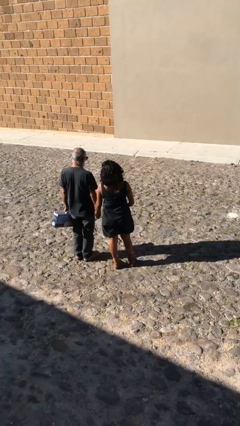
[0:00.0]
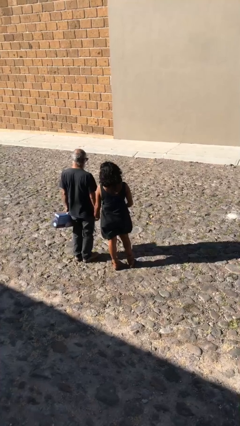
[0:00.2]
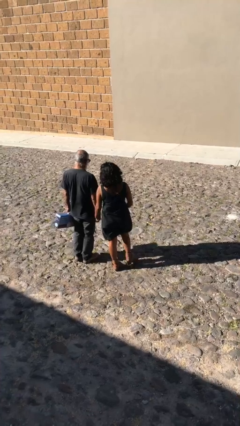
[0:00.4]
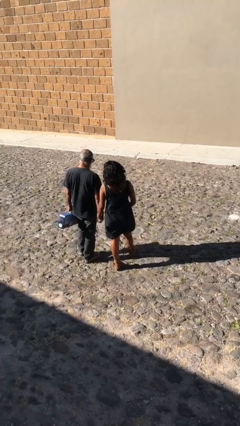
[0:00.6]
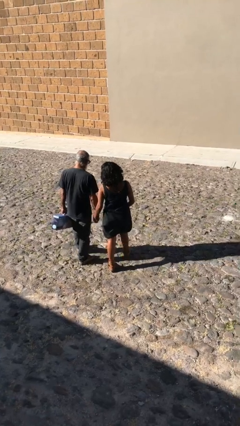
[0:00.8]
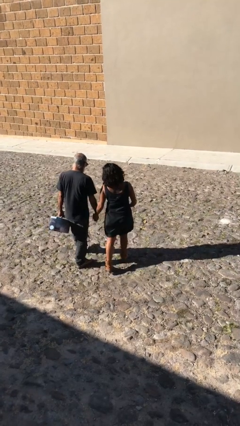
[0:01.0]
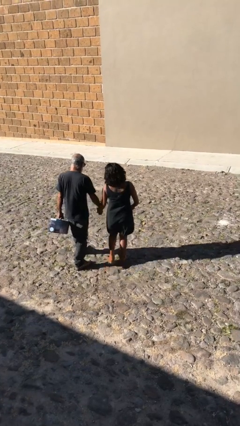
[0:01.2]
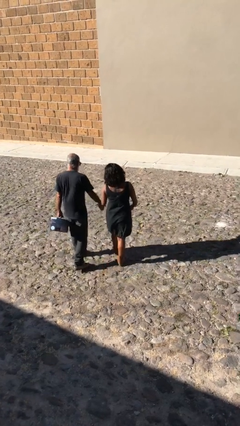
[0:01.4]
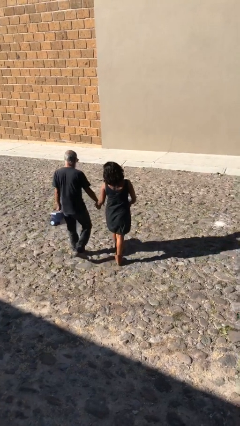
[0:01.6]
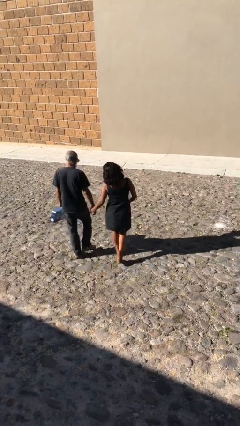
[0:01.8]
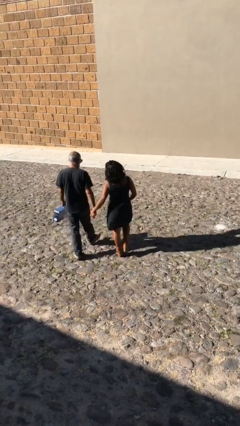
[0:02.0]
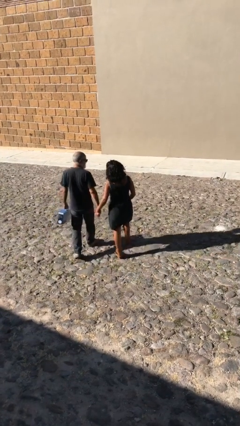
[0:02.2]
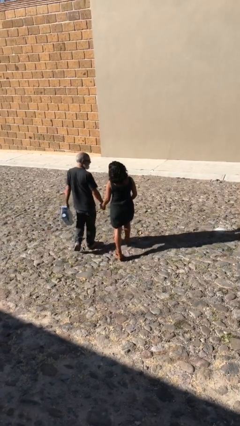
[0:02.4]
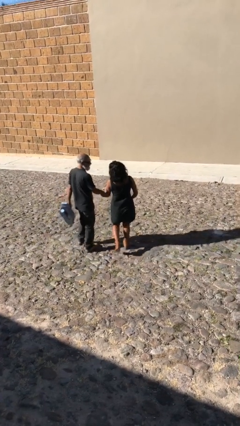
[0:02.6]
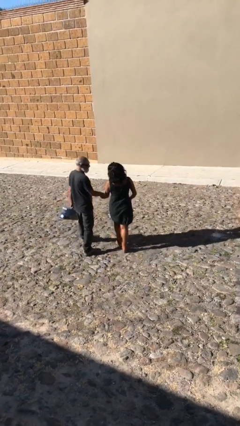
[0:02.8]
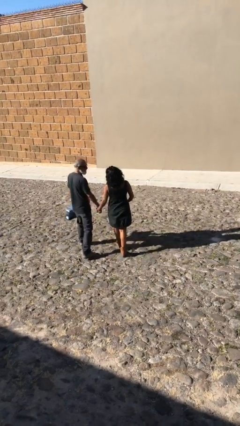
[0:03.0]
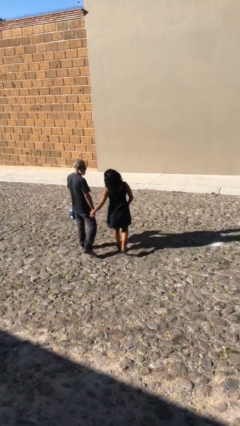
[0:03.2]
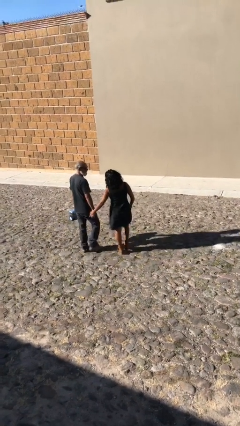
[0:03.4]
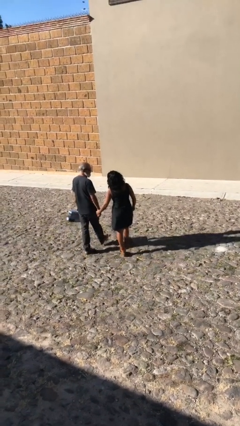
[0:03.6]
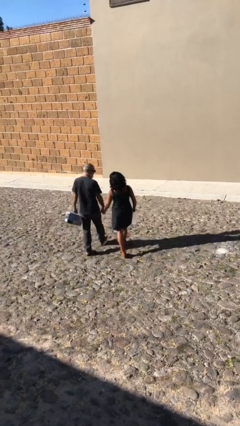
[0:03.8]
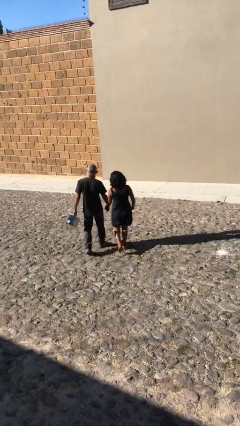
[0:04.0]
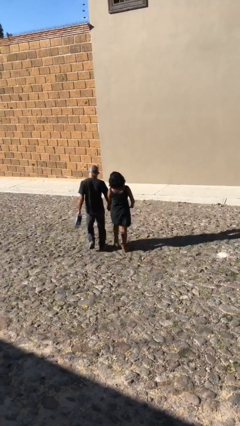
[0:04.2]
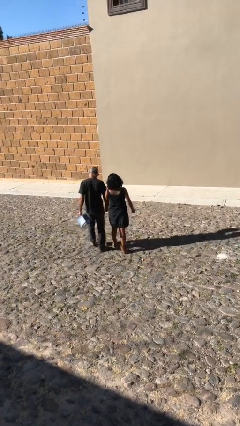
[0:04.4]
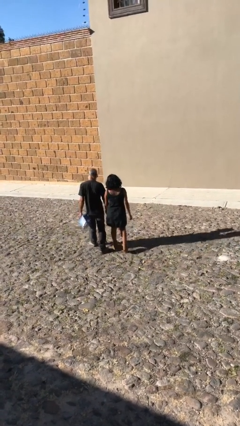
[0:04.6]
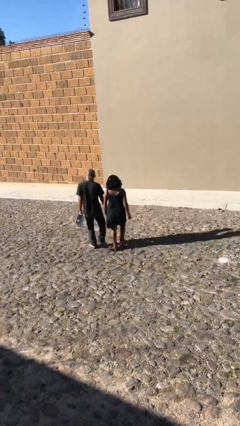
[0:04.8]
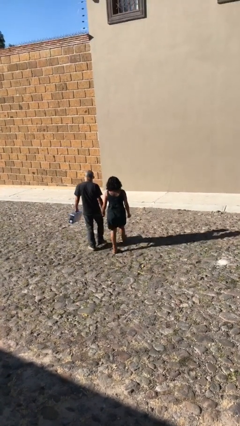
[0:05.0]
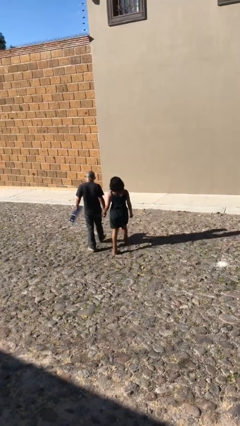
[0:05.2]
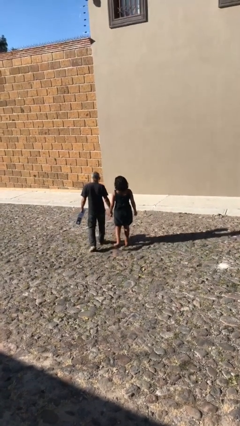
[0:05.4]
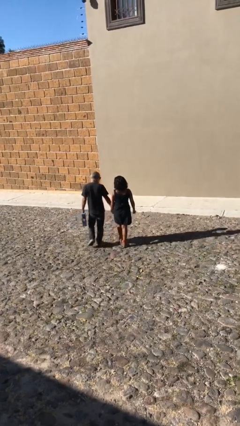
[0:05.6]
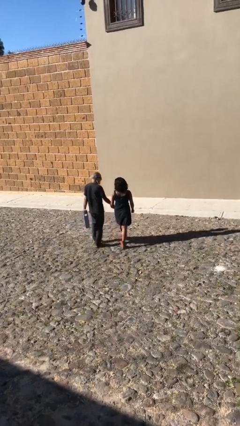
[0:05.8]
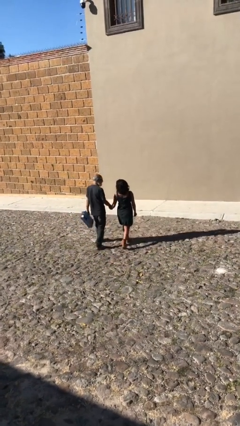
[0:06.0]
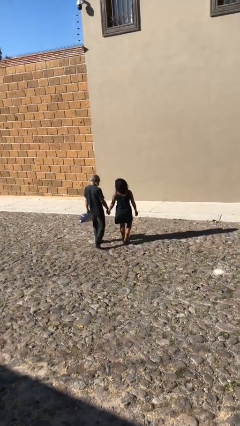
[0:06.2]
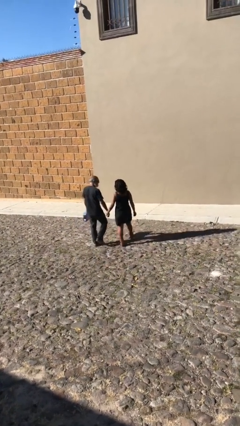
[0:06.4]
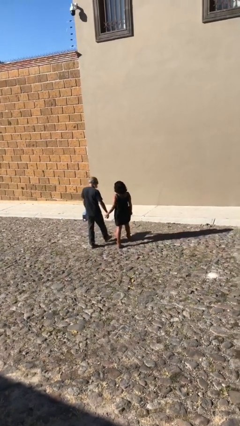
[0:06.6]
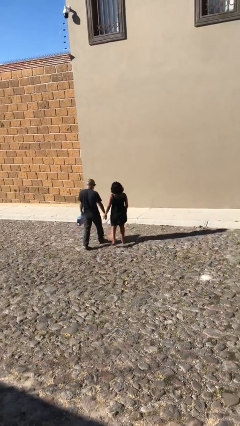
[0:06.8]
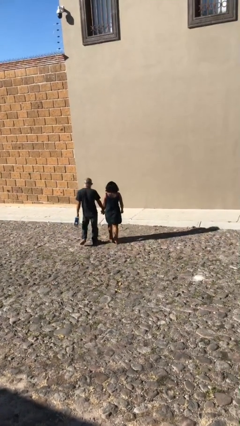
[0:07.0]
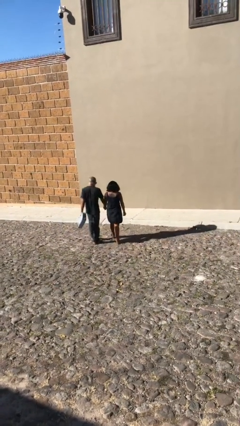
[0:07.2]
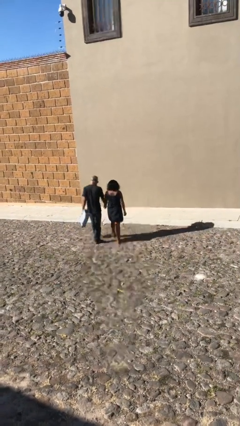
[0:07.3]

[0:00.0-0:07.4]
person holds hand

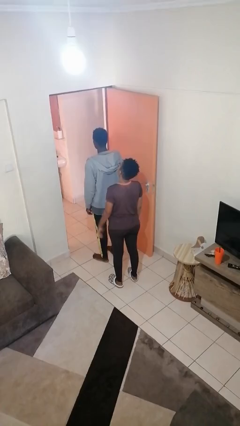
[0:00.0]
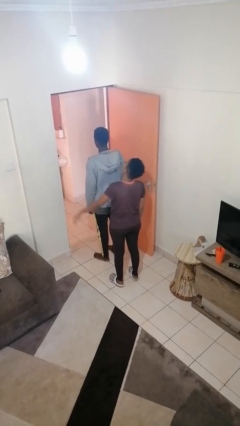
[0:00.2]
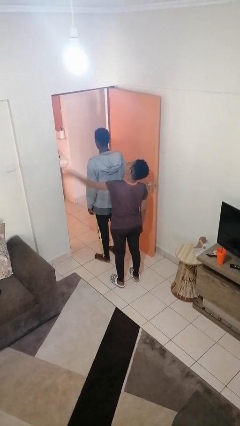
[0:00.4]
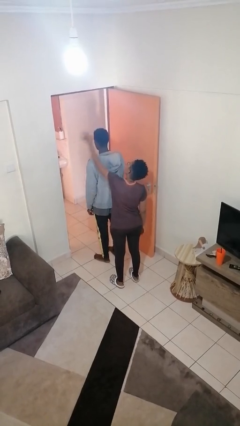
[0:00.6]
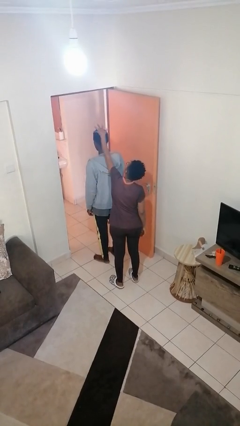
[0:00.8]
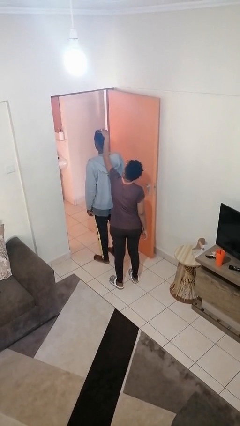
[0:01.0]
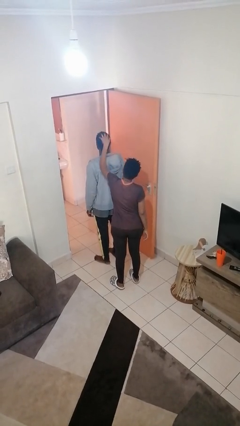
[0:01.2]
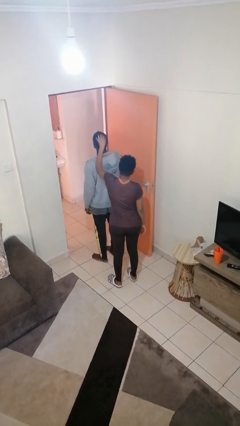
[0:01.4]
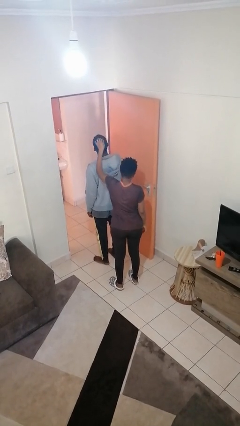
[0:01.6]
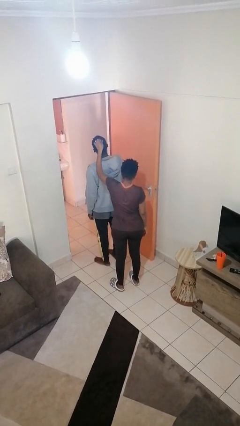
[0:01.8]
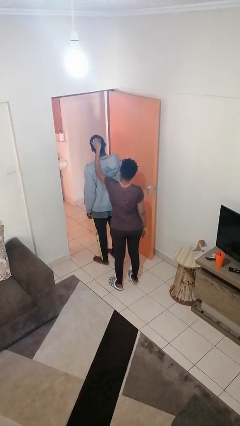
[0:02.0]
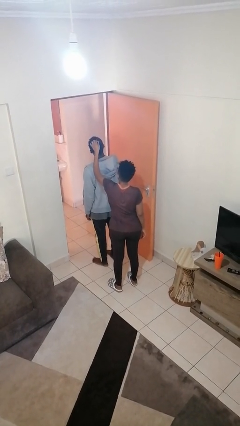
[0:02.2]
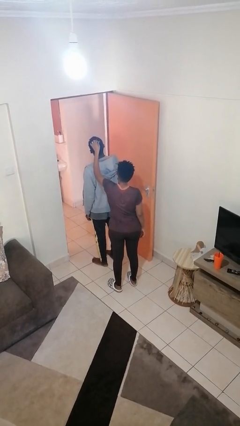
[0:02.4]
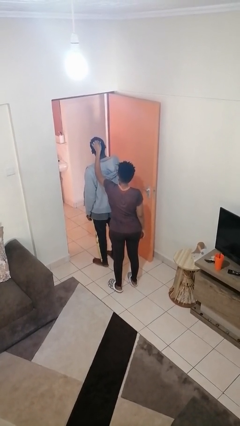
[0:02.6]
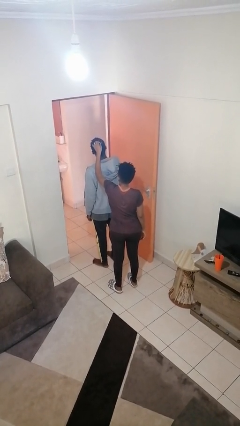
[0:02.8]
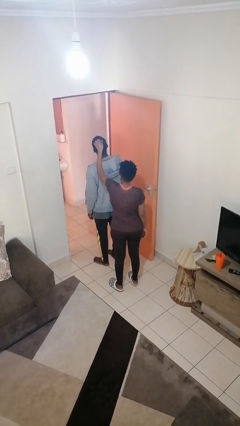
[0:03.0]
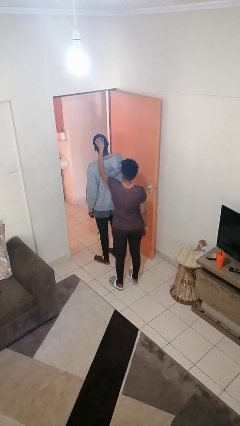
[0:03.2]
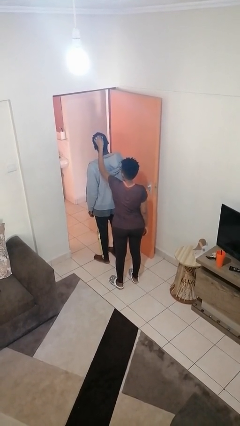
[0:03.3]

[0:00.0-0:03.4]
person grabs person by hair

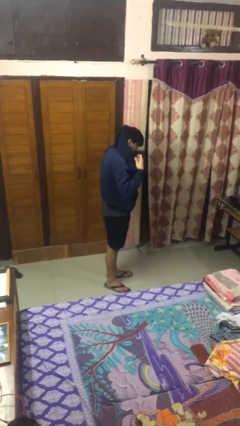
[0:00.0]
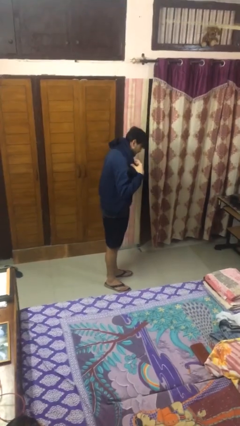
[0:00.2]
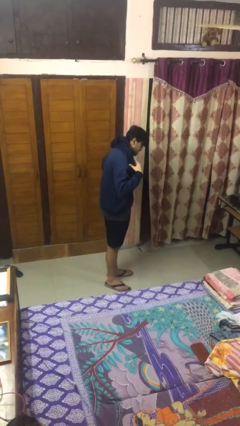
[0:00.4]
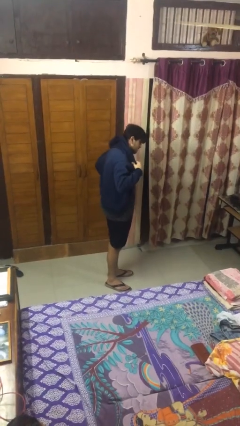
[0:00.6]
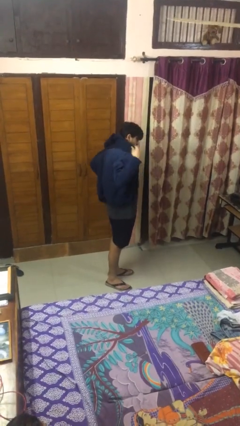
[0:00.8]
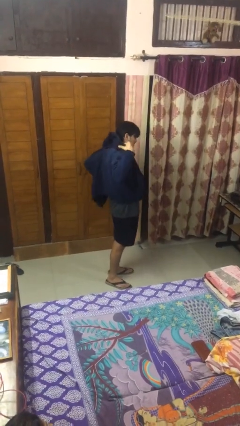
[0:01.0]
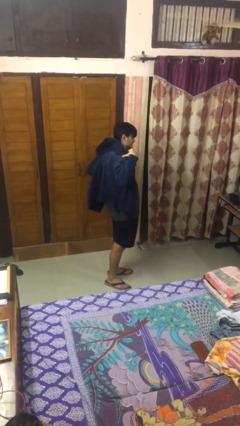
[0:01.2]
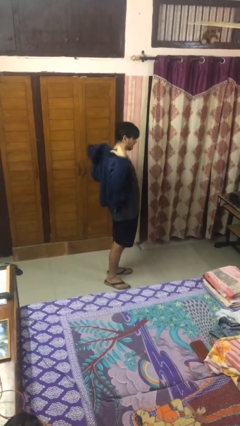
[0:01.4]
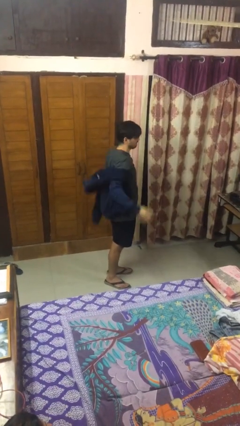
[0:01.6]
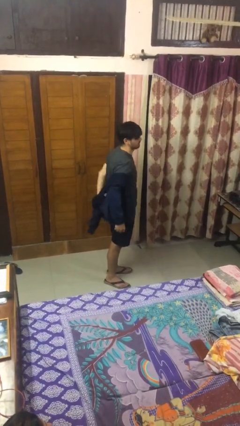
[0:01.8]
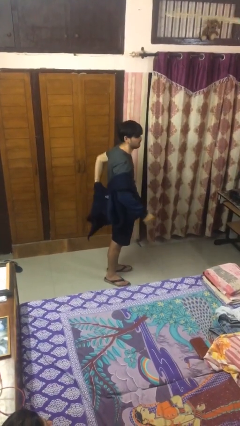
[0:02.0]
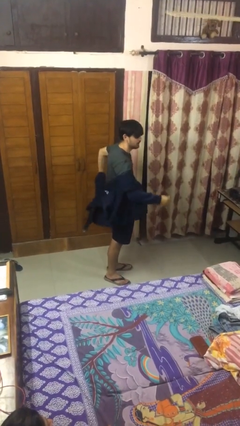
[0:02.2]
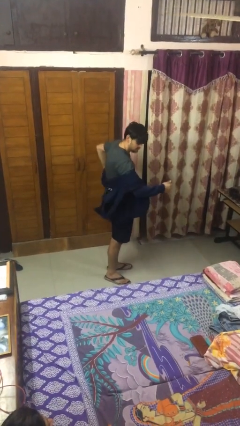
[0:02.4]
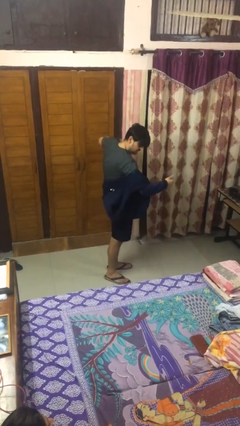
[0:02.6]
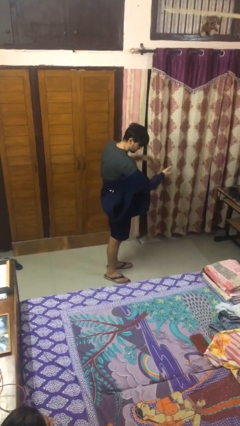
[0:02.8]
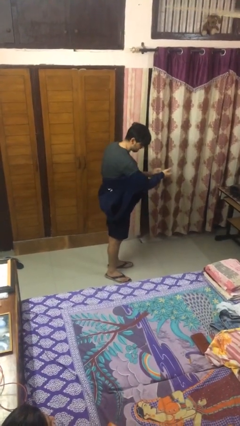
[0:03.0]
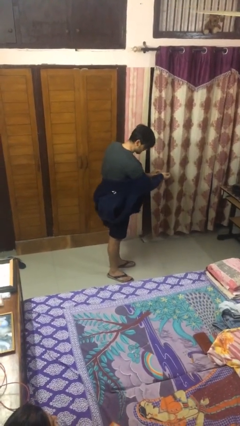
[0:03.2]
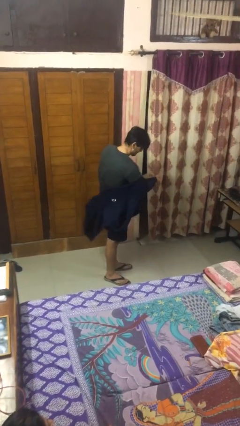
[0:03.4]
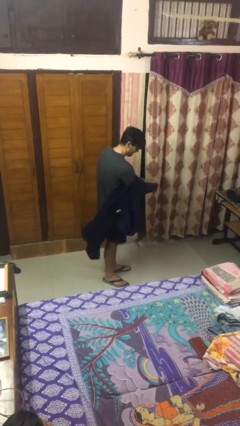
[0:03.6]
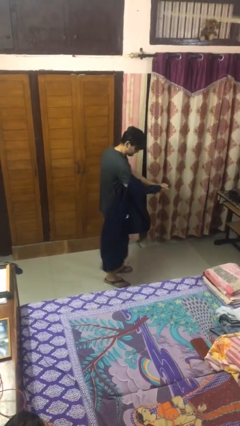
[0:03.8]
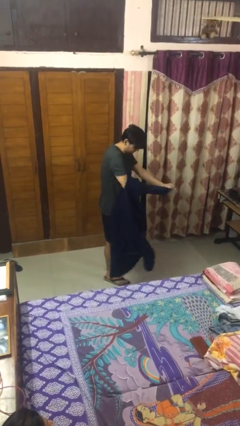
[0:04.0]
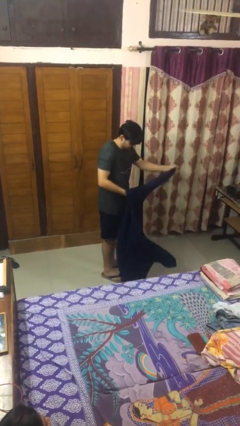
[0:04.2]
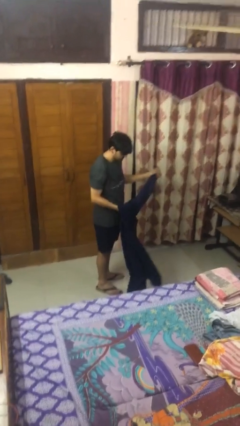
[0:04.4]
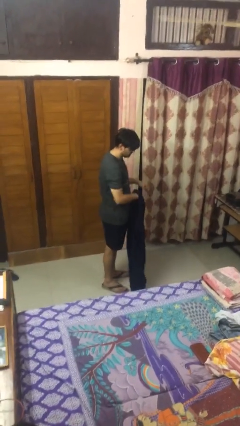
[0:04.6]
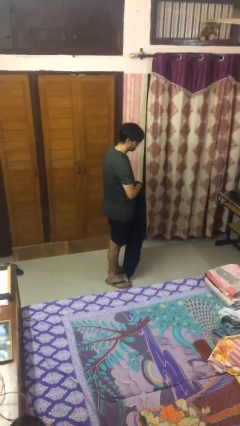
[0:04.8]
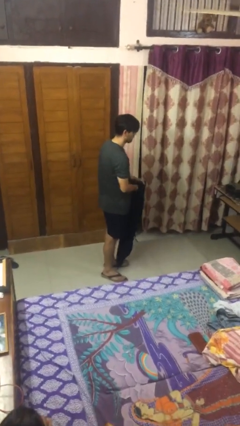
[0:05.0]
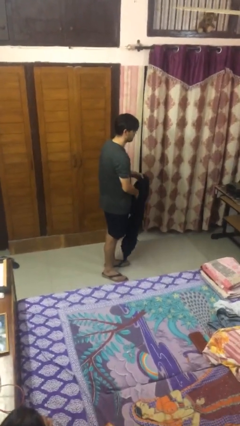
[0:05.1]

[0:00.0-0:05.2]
person takes off hoodie

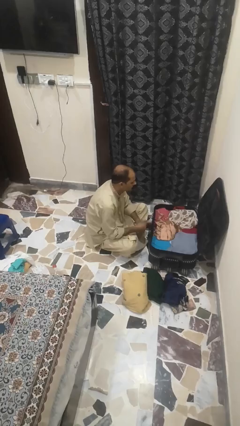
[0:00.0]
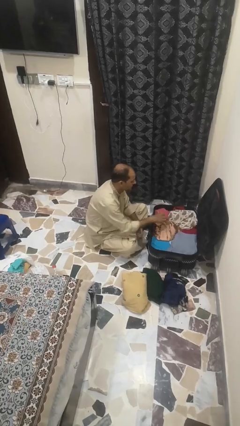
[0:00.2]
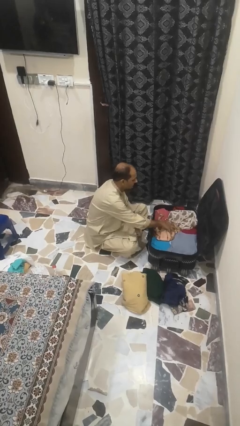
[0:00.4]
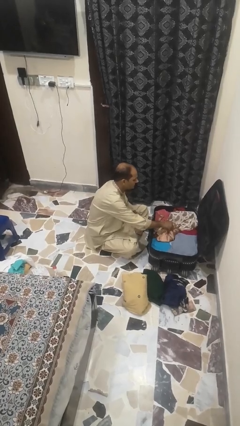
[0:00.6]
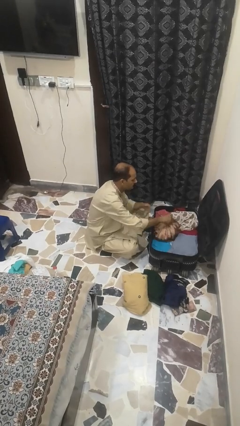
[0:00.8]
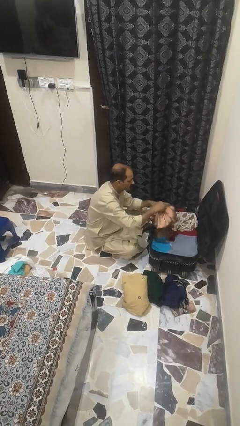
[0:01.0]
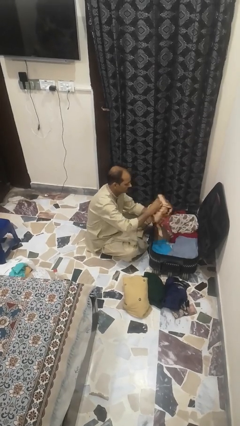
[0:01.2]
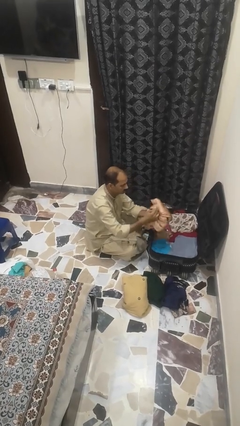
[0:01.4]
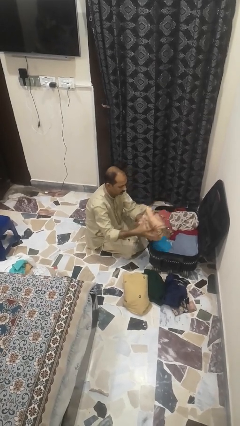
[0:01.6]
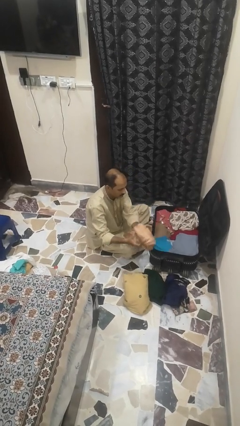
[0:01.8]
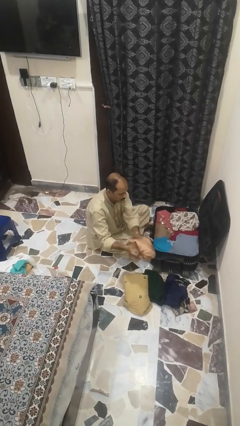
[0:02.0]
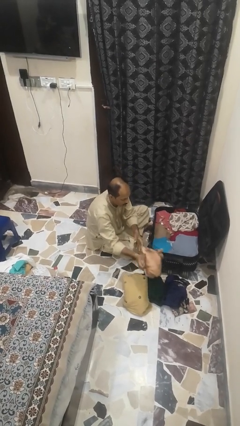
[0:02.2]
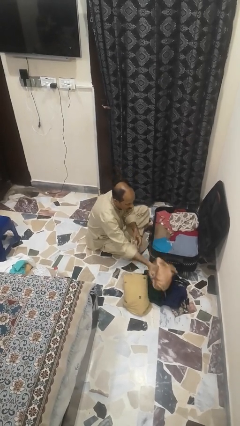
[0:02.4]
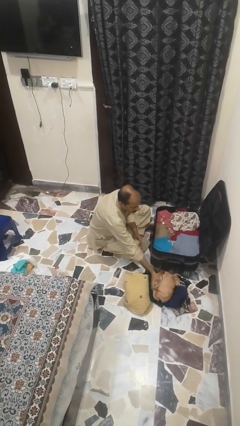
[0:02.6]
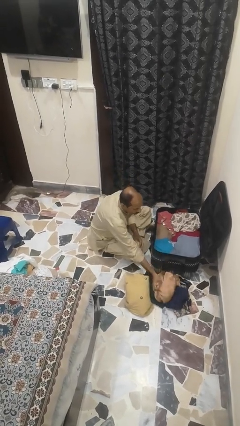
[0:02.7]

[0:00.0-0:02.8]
person unloads clothes from suitcase
